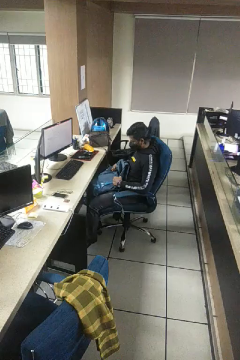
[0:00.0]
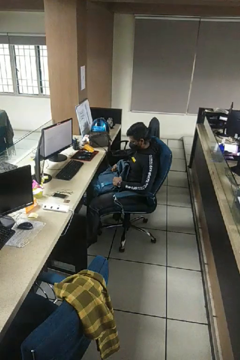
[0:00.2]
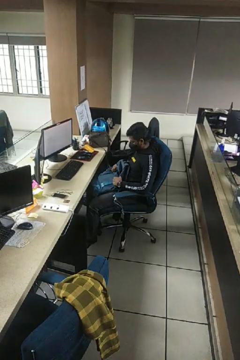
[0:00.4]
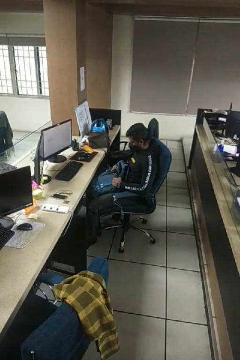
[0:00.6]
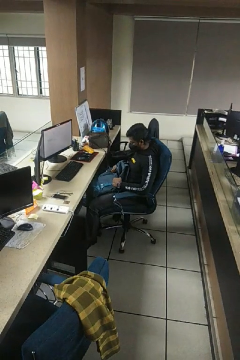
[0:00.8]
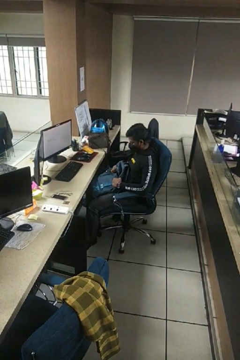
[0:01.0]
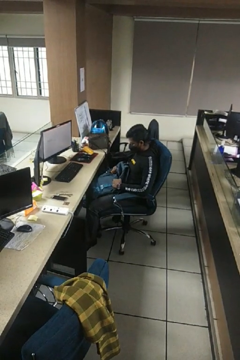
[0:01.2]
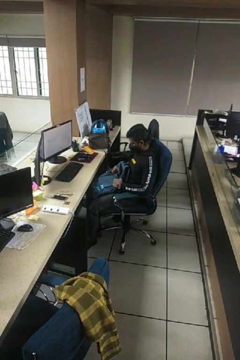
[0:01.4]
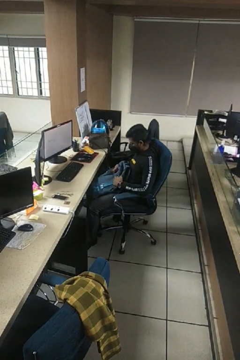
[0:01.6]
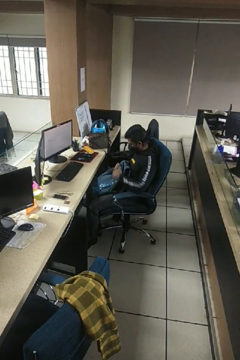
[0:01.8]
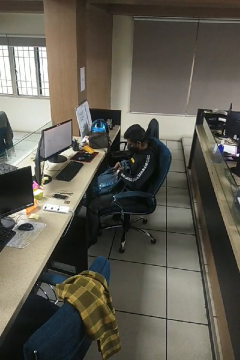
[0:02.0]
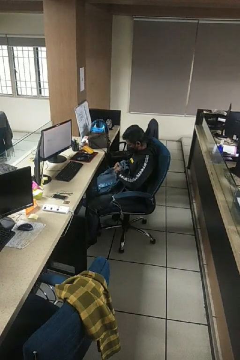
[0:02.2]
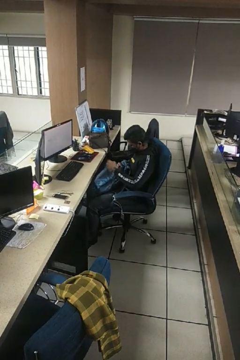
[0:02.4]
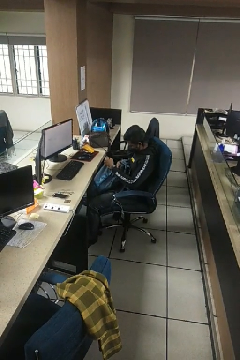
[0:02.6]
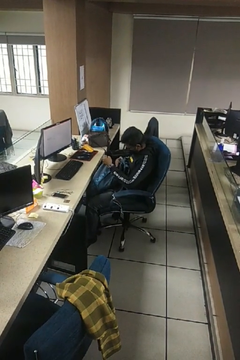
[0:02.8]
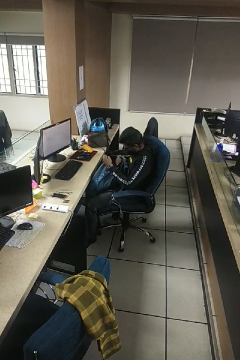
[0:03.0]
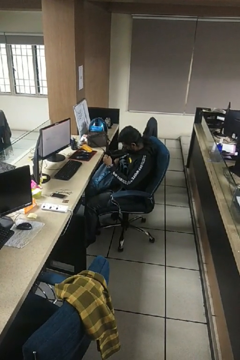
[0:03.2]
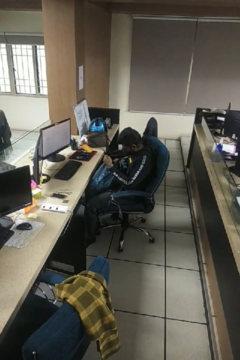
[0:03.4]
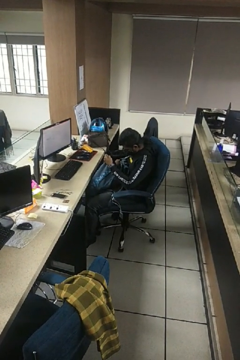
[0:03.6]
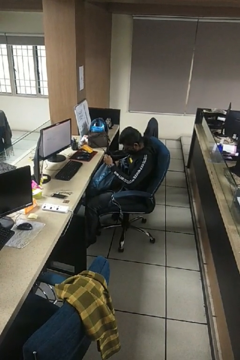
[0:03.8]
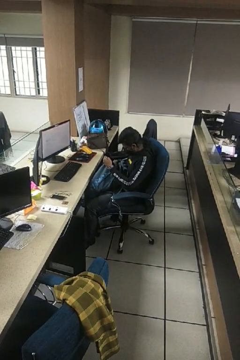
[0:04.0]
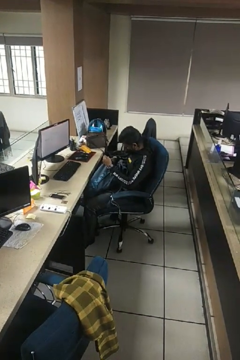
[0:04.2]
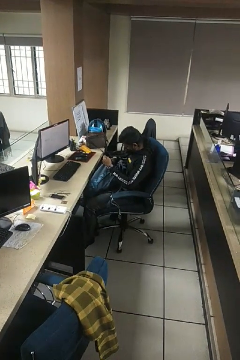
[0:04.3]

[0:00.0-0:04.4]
person searches in backpack

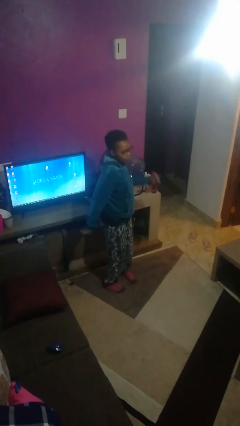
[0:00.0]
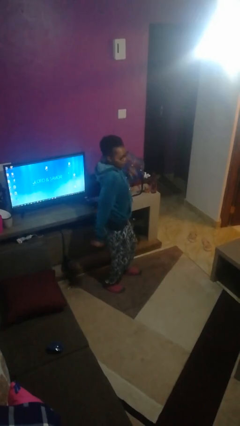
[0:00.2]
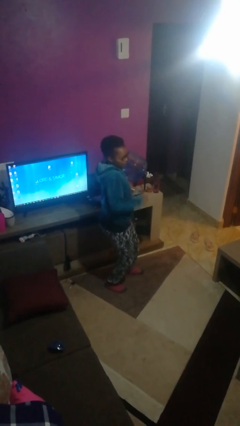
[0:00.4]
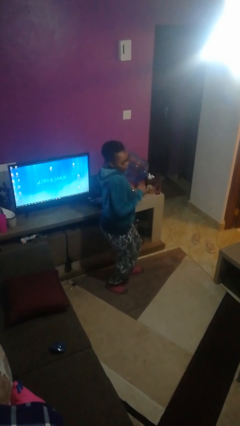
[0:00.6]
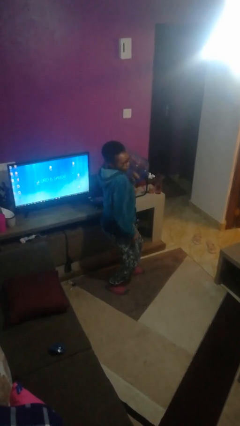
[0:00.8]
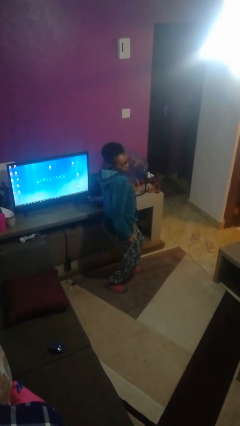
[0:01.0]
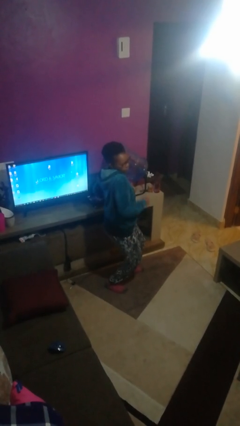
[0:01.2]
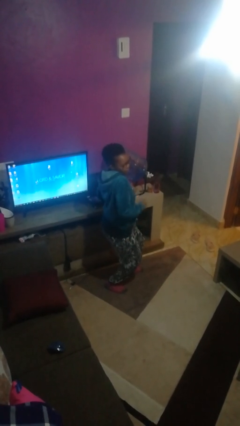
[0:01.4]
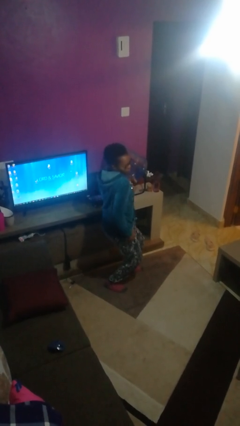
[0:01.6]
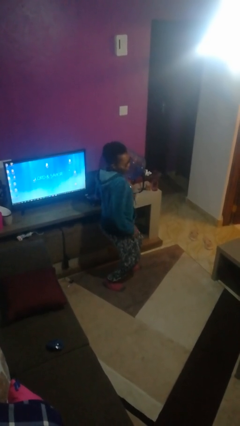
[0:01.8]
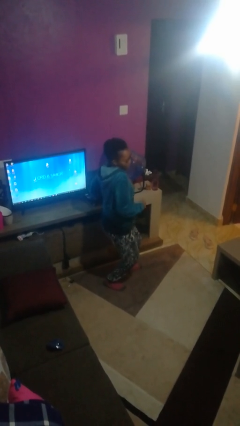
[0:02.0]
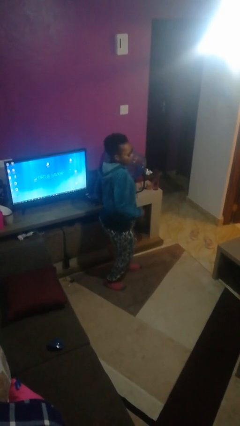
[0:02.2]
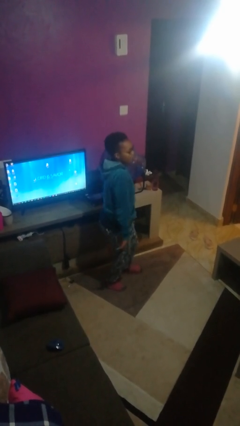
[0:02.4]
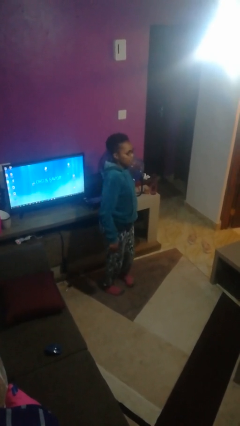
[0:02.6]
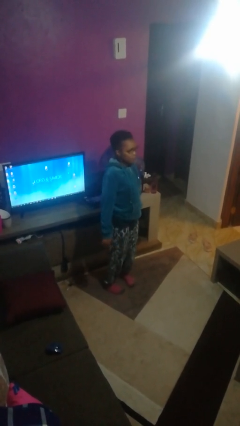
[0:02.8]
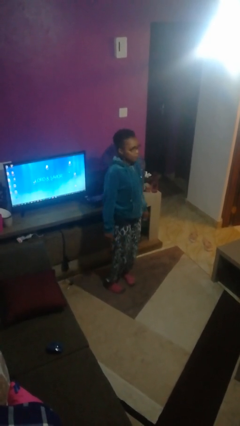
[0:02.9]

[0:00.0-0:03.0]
person dances in place

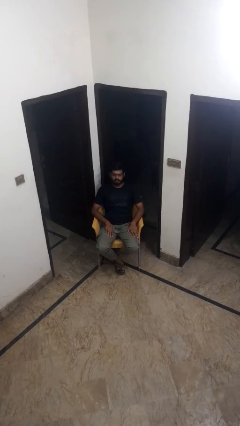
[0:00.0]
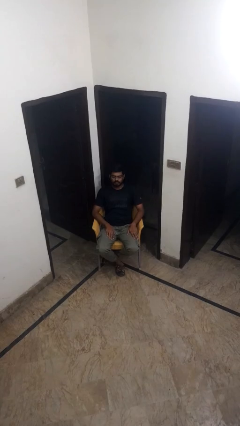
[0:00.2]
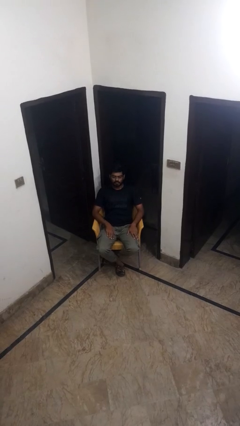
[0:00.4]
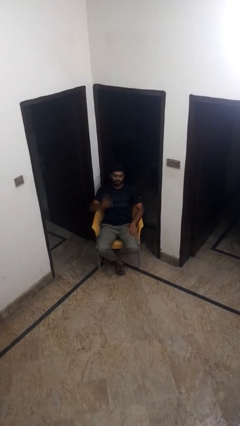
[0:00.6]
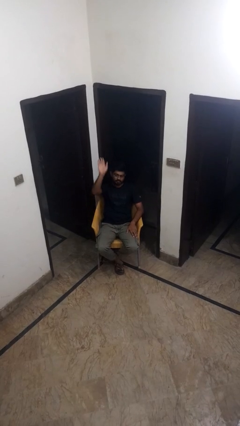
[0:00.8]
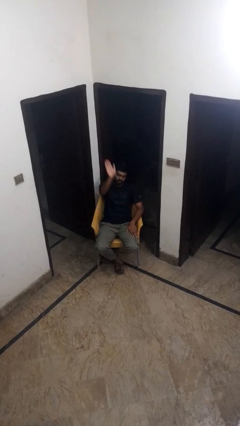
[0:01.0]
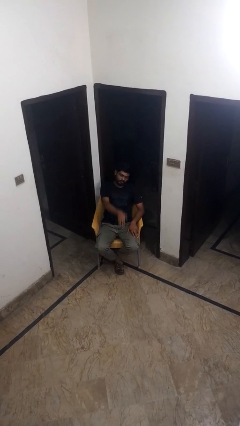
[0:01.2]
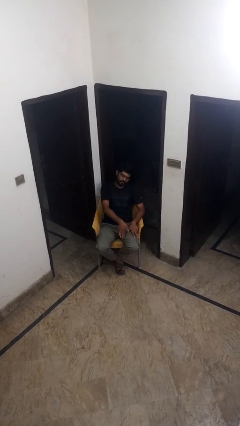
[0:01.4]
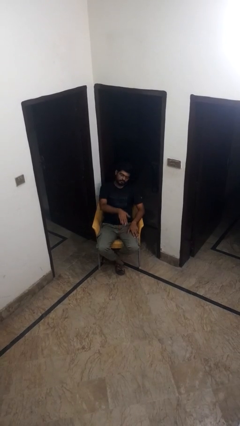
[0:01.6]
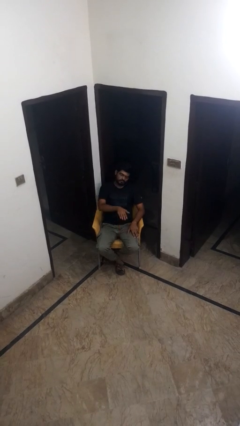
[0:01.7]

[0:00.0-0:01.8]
person gestures swipe down

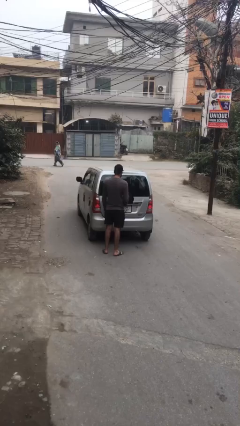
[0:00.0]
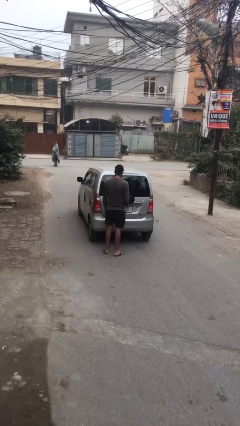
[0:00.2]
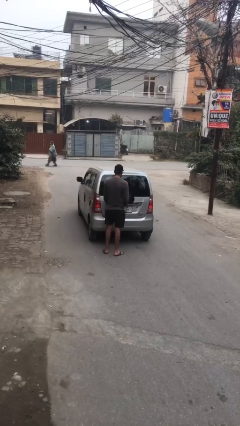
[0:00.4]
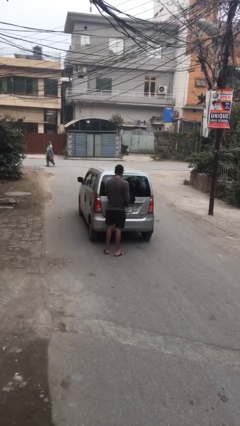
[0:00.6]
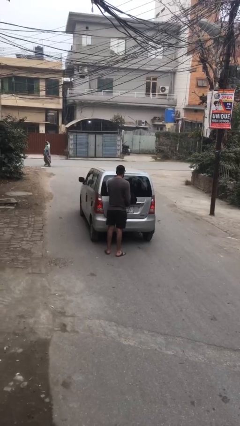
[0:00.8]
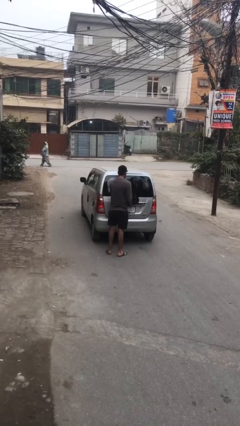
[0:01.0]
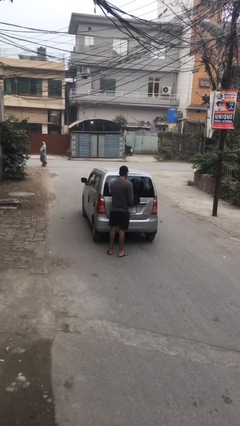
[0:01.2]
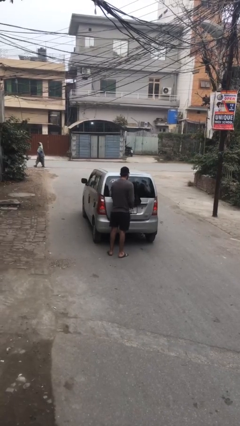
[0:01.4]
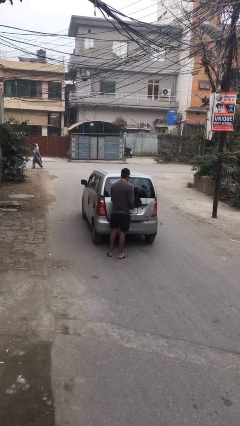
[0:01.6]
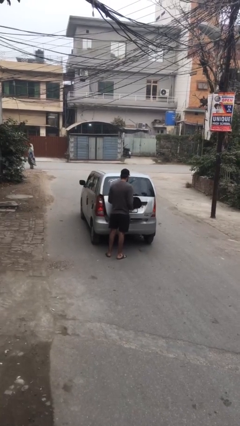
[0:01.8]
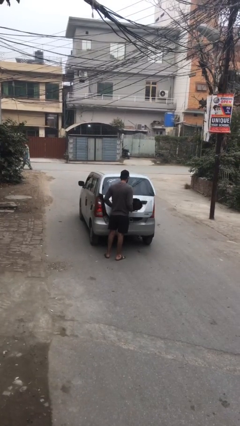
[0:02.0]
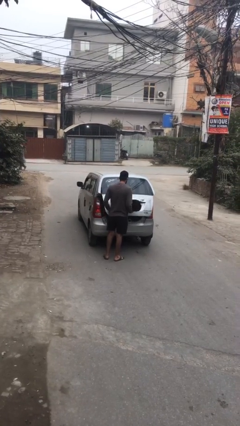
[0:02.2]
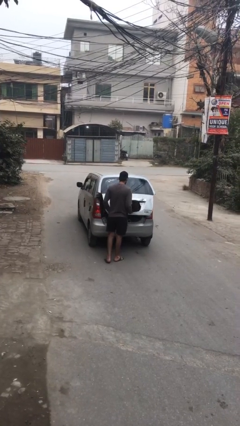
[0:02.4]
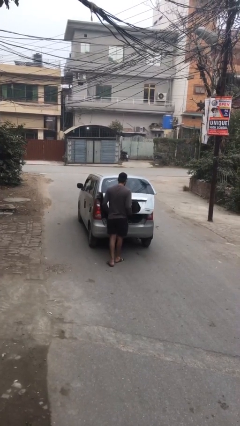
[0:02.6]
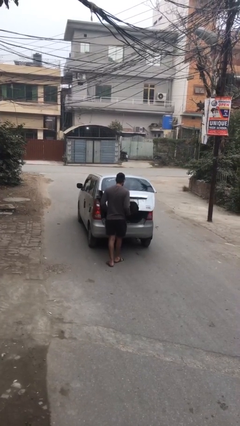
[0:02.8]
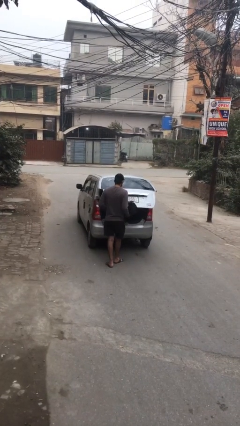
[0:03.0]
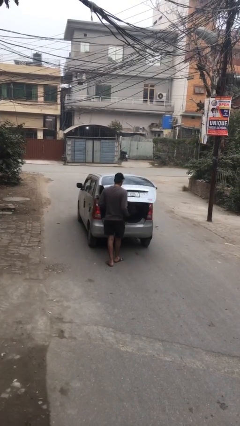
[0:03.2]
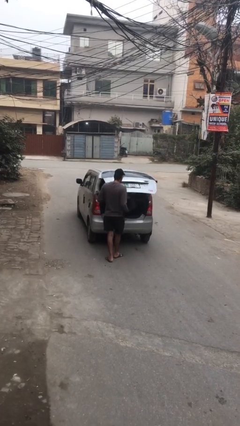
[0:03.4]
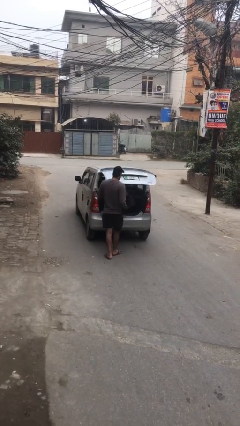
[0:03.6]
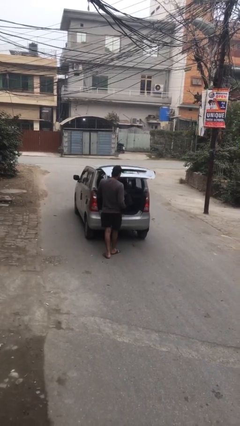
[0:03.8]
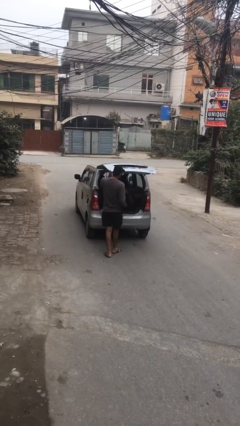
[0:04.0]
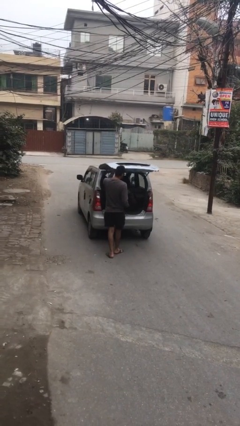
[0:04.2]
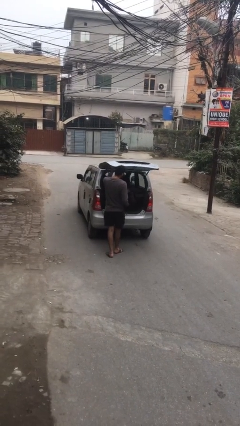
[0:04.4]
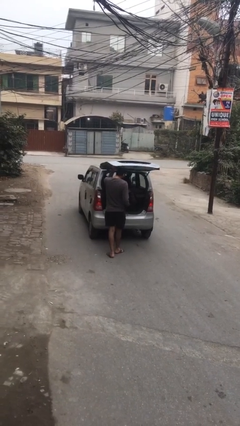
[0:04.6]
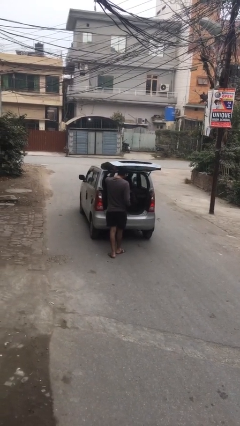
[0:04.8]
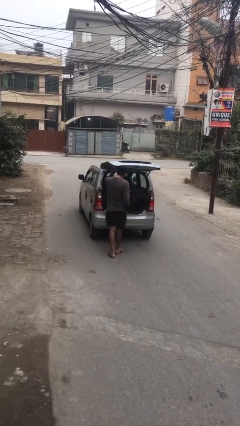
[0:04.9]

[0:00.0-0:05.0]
person opens car trunk

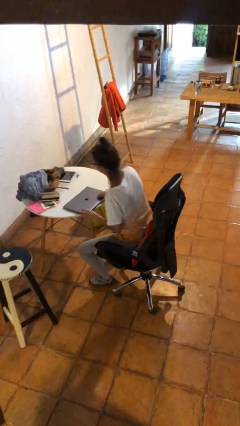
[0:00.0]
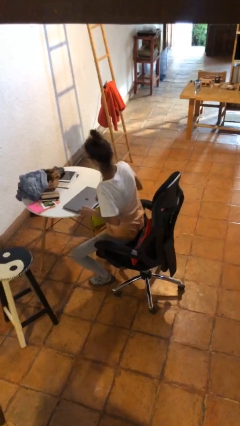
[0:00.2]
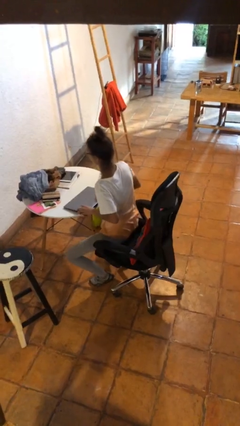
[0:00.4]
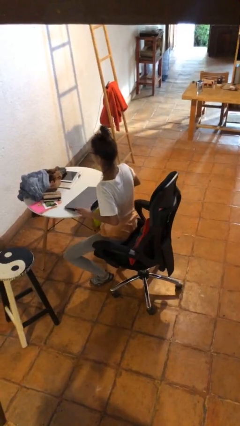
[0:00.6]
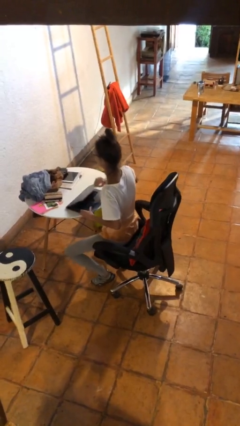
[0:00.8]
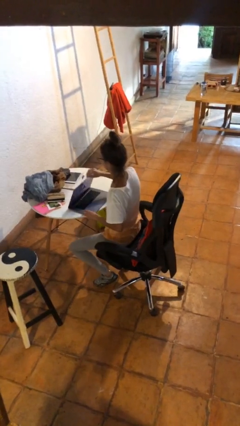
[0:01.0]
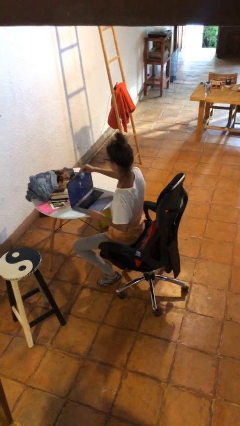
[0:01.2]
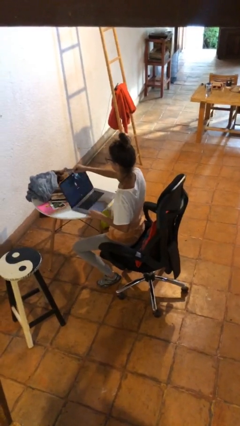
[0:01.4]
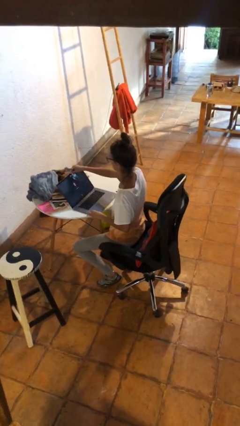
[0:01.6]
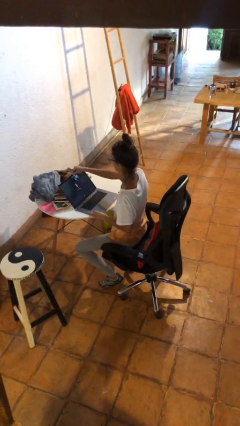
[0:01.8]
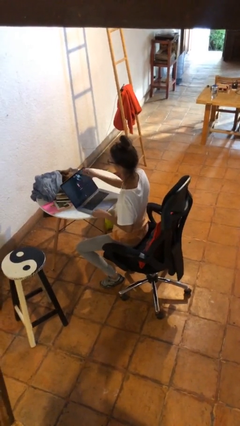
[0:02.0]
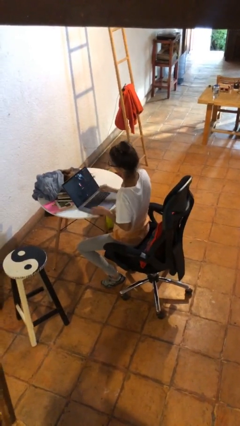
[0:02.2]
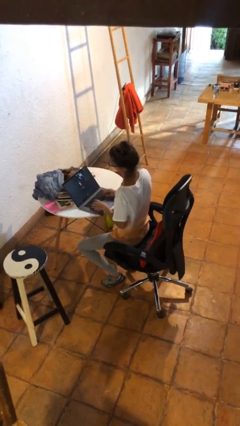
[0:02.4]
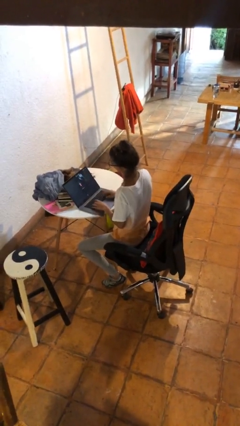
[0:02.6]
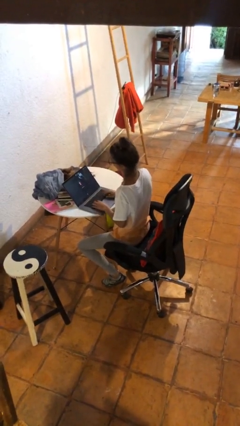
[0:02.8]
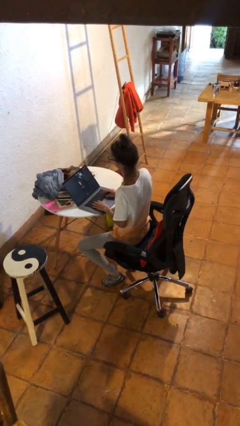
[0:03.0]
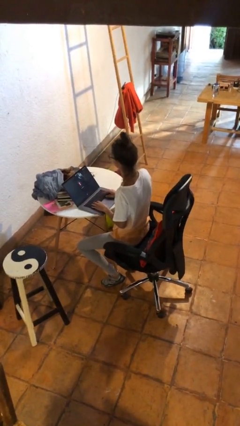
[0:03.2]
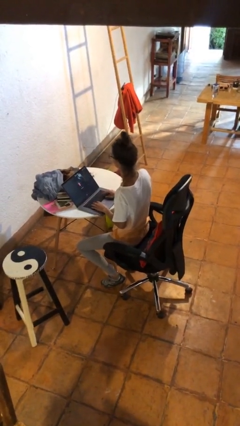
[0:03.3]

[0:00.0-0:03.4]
person opens laptop

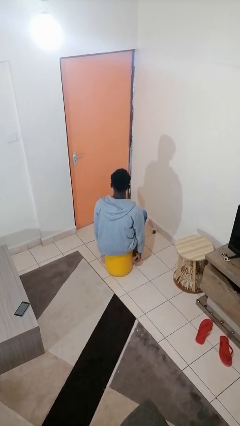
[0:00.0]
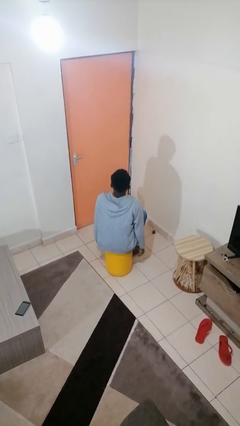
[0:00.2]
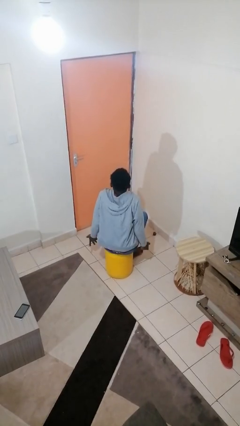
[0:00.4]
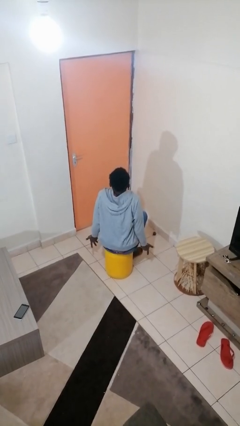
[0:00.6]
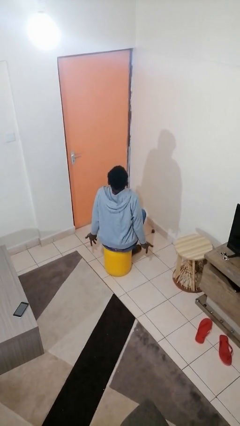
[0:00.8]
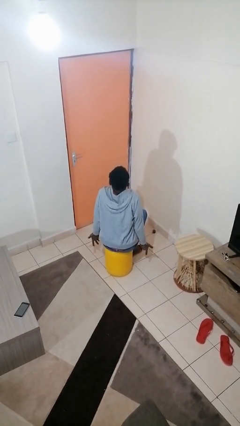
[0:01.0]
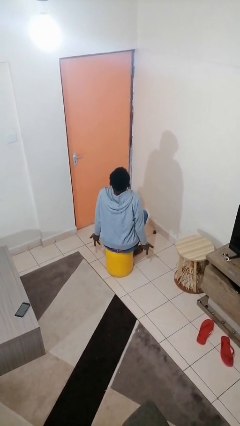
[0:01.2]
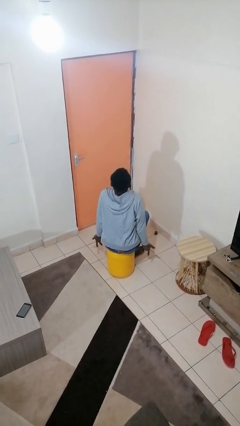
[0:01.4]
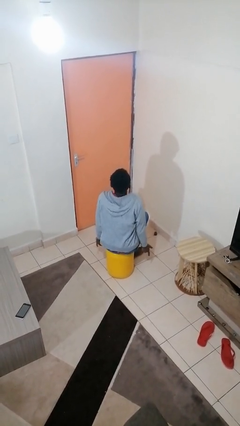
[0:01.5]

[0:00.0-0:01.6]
person shrugs
